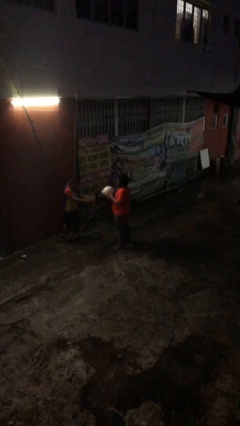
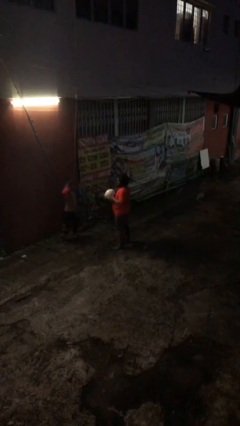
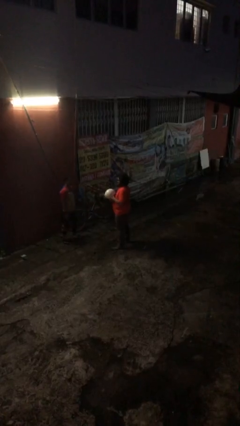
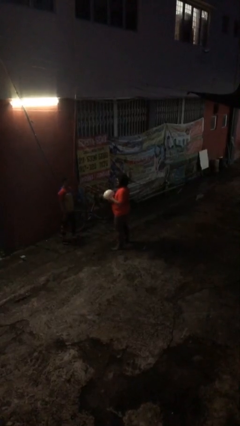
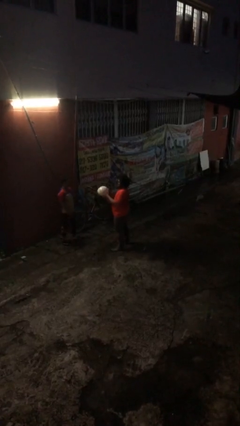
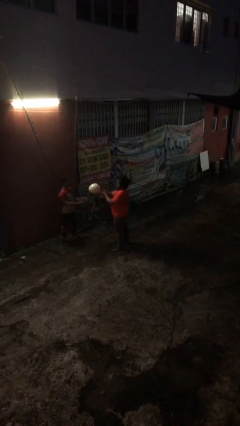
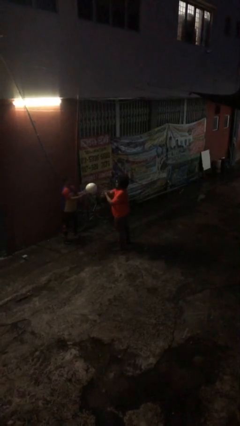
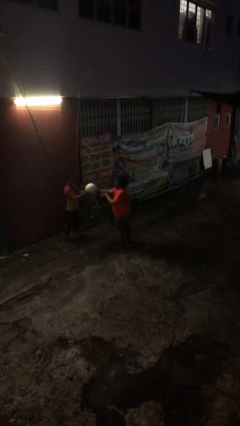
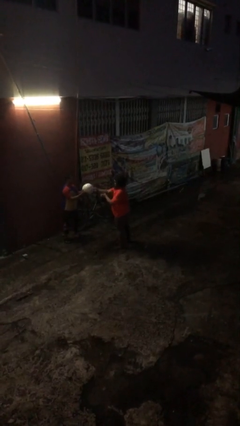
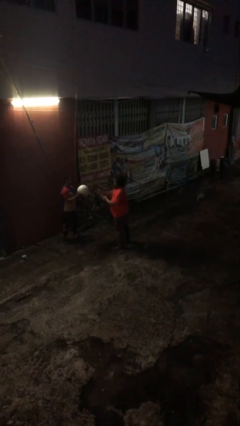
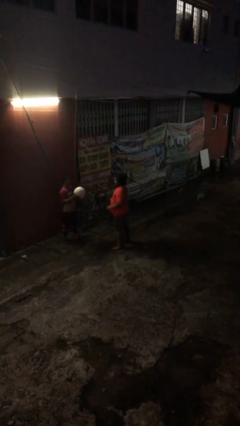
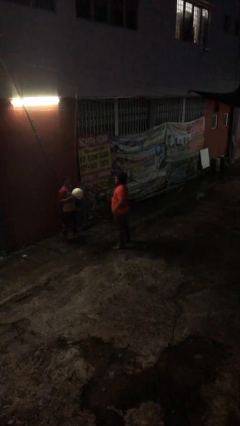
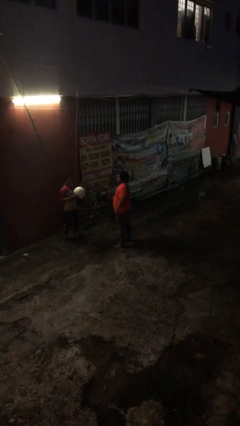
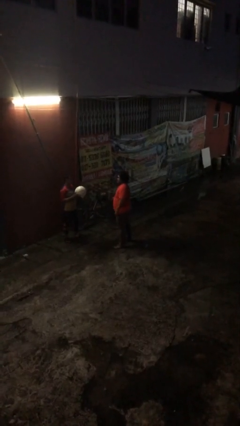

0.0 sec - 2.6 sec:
person transfers object to person

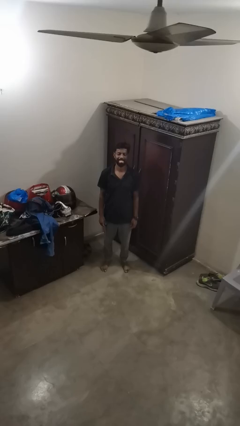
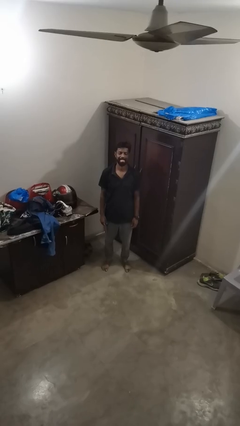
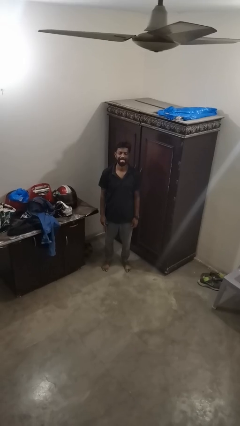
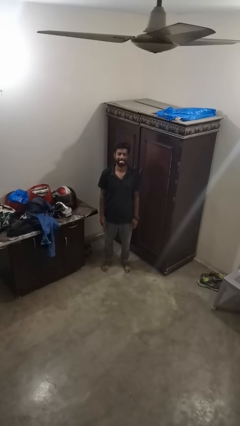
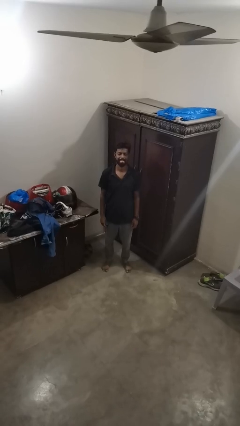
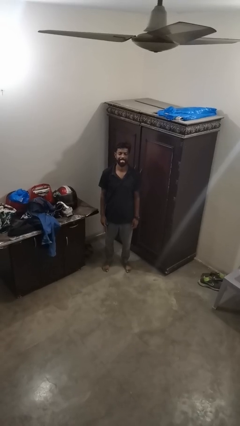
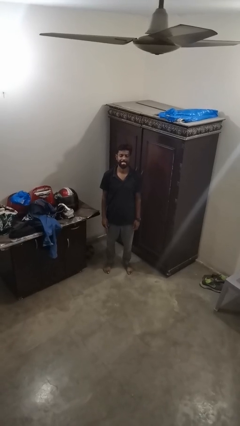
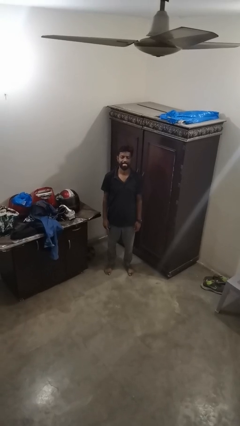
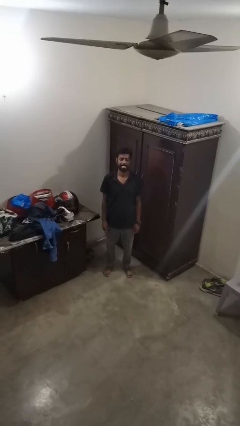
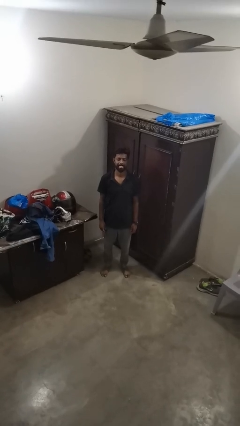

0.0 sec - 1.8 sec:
person sticks out tongue

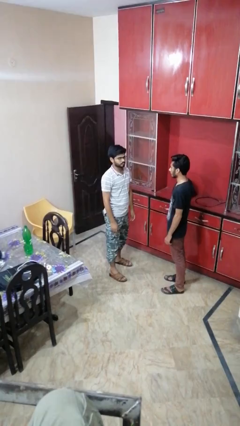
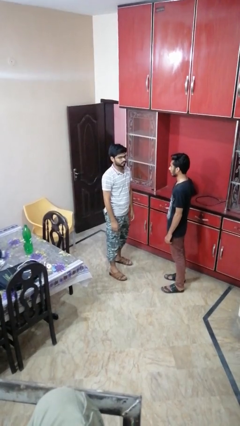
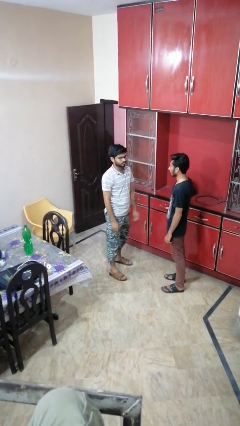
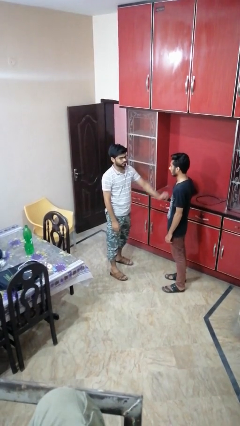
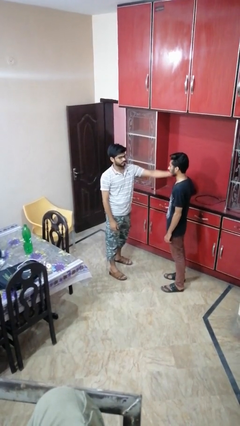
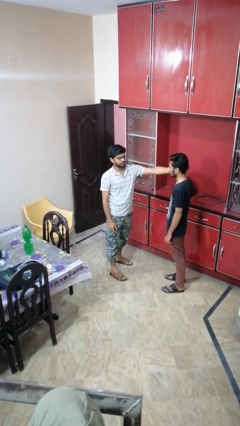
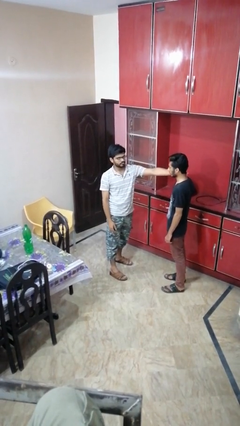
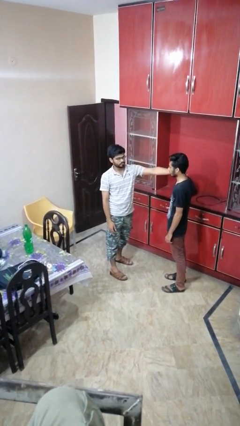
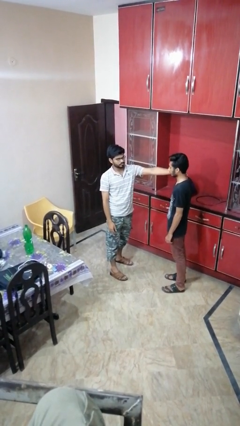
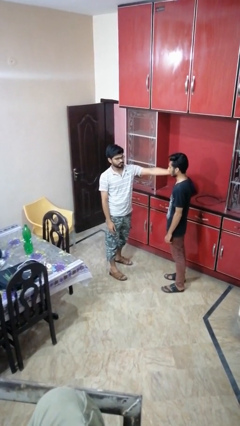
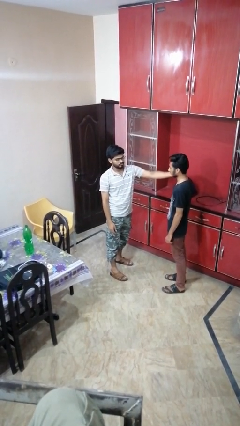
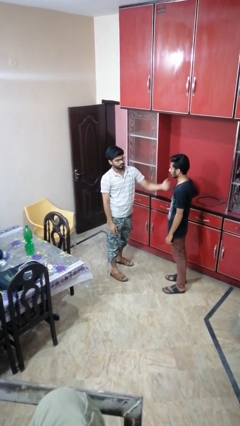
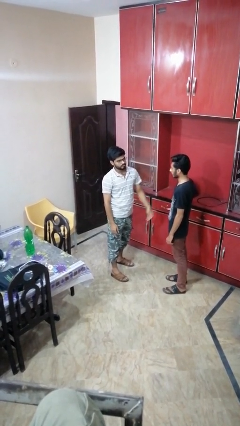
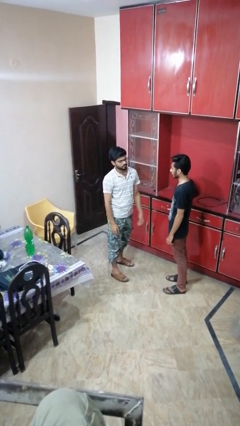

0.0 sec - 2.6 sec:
person touches face of person

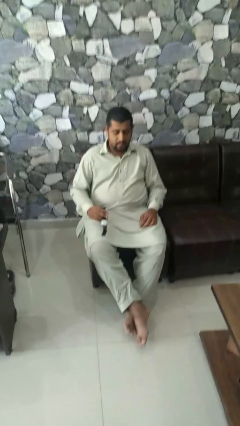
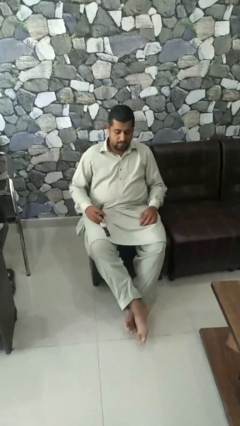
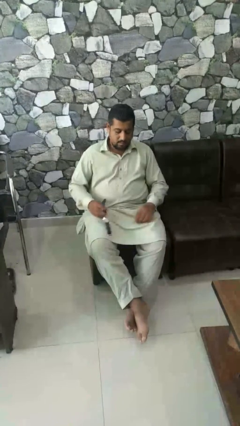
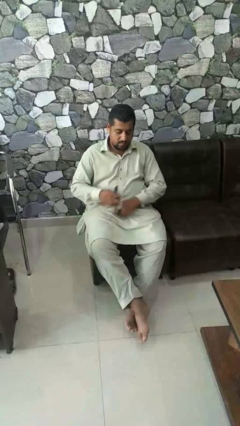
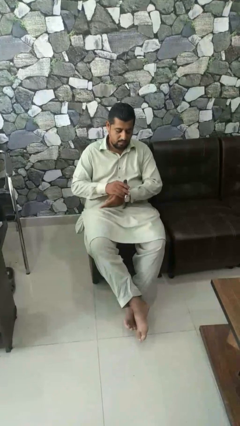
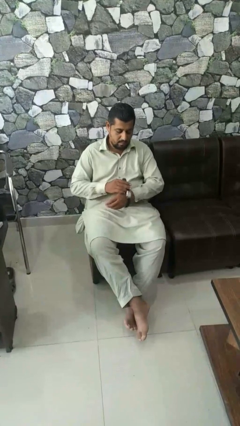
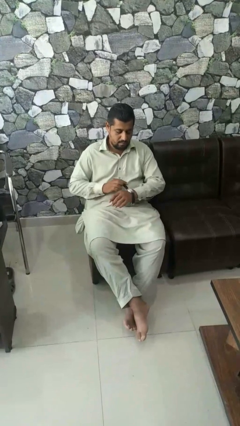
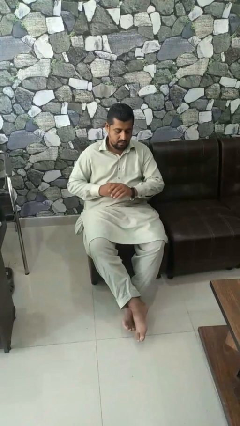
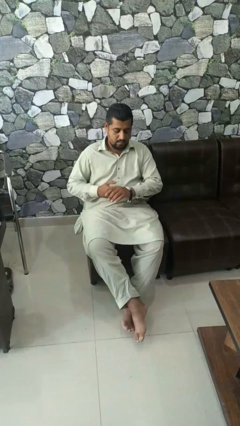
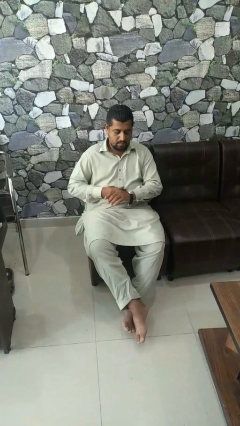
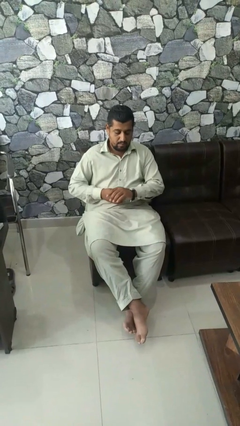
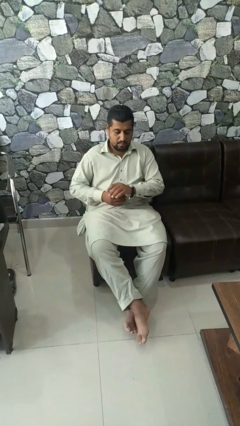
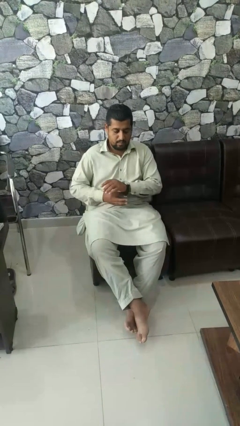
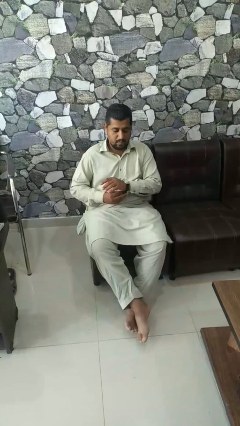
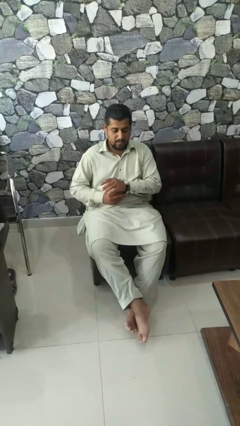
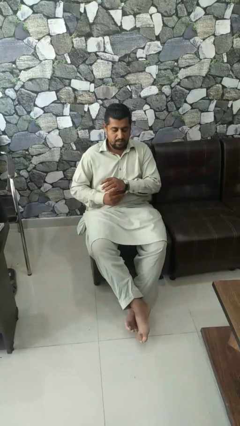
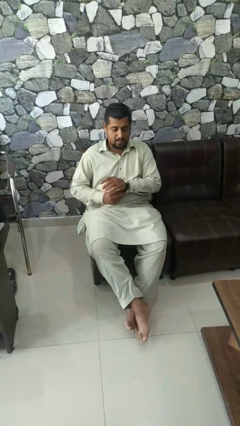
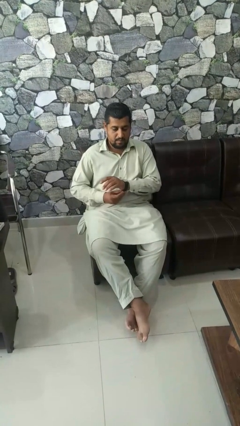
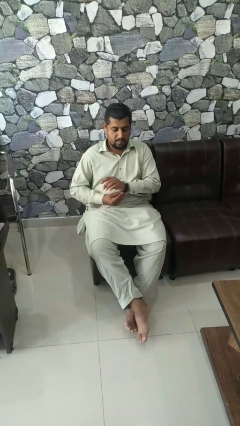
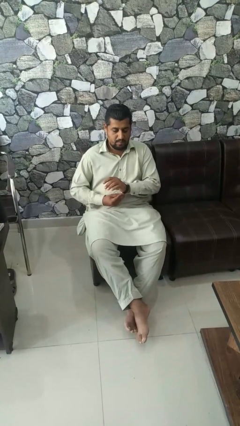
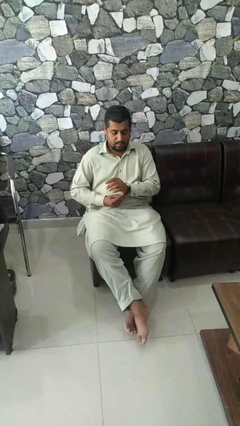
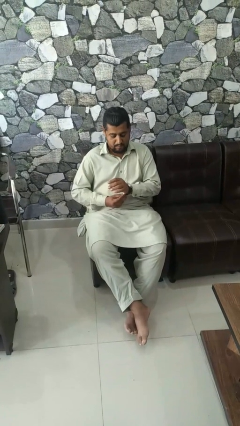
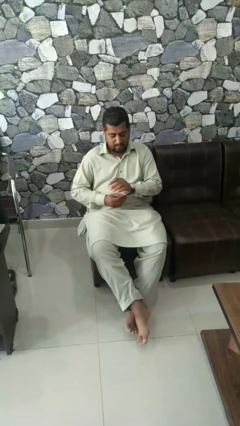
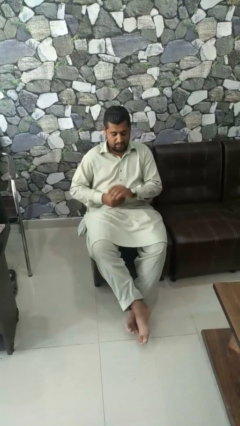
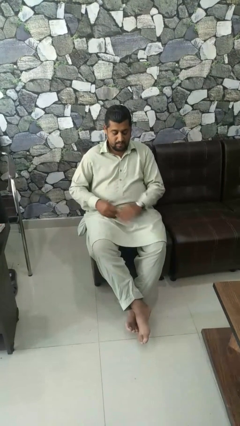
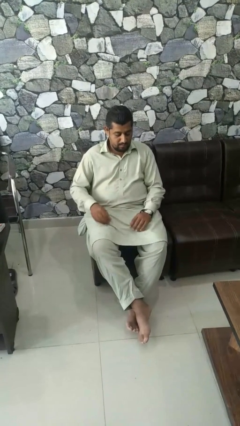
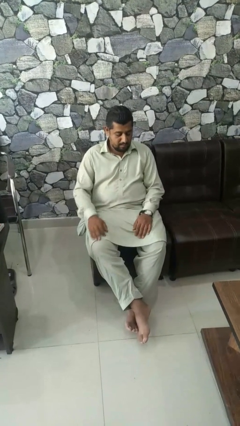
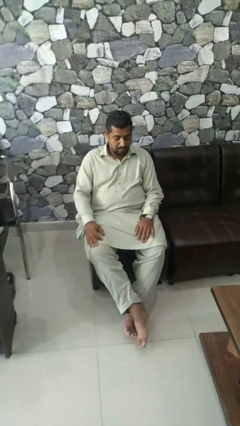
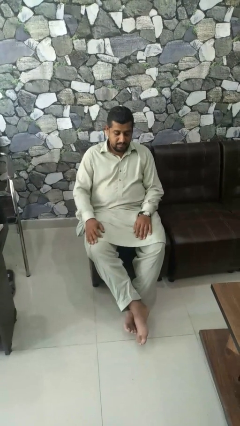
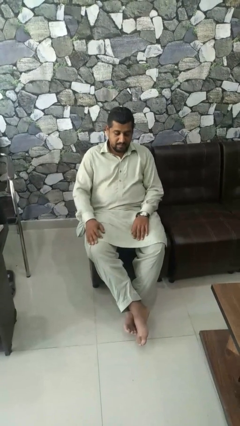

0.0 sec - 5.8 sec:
person puts on wristwatch

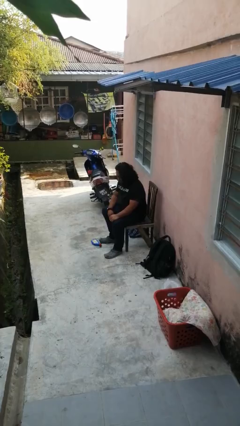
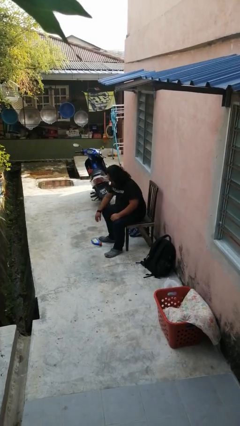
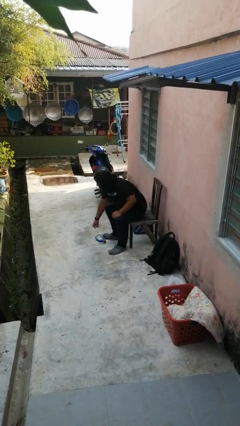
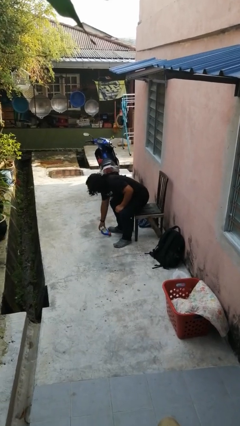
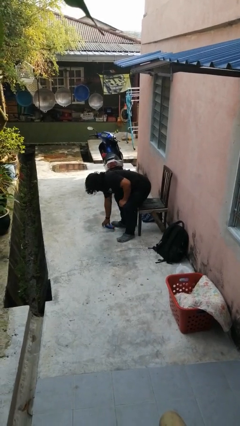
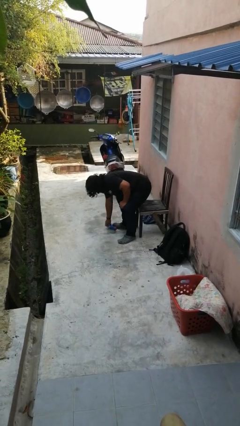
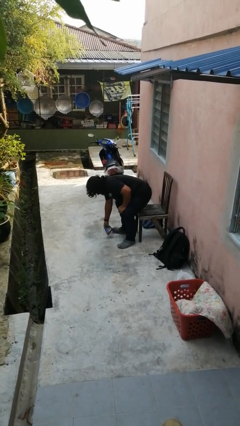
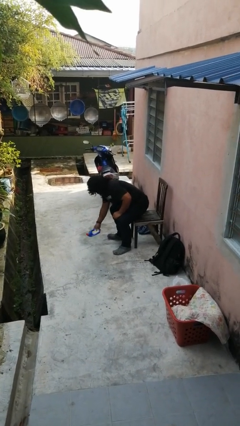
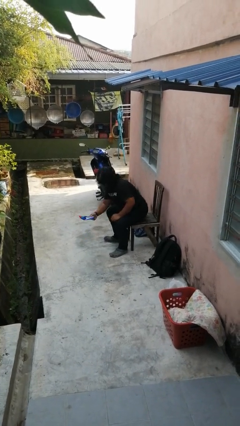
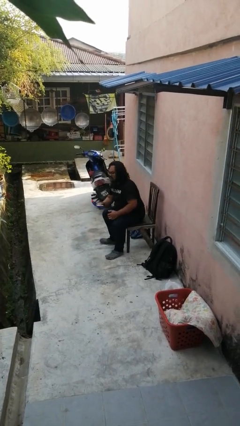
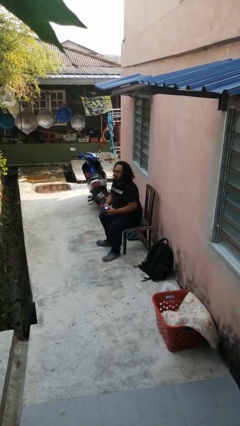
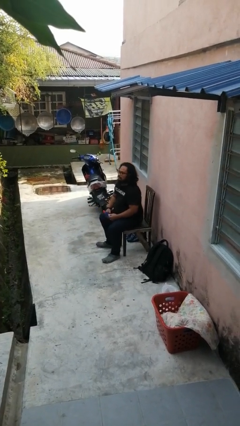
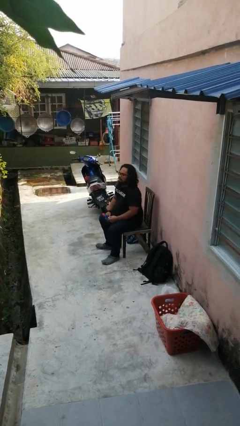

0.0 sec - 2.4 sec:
person picks up object from floor

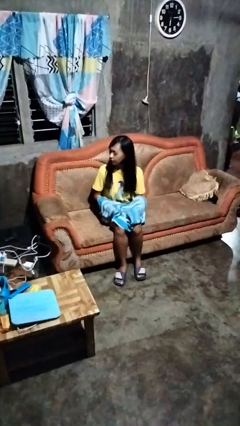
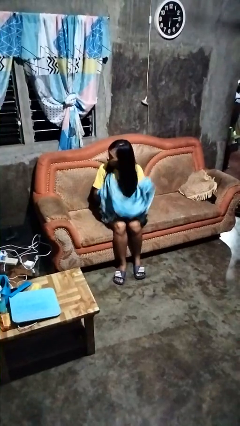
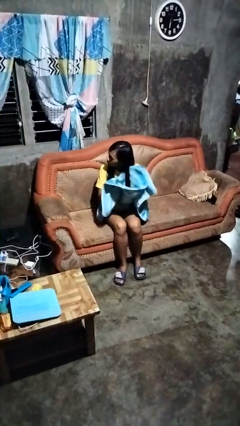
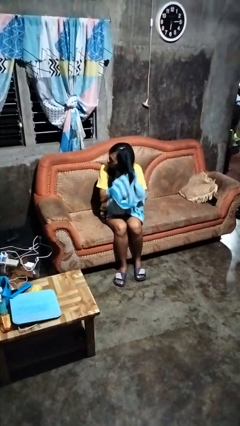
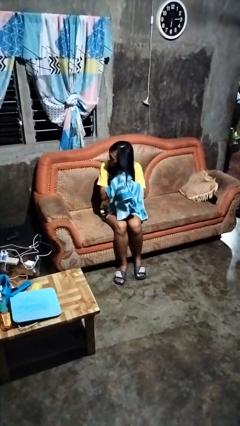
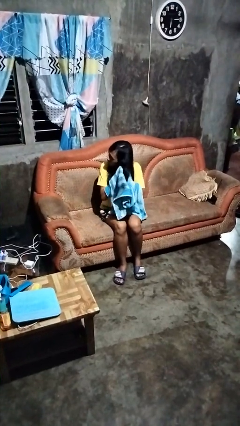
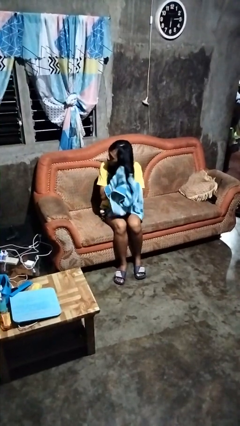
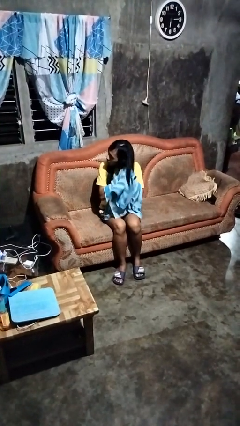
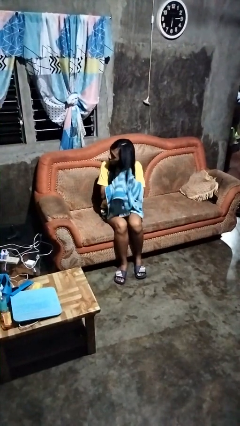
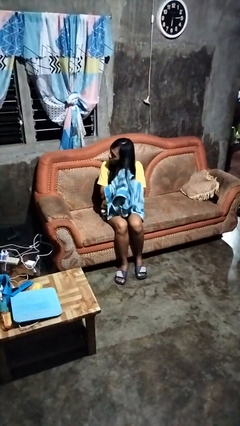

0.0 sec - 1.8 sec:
person dries hair with towel

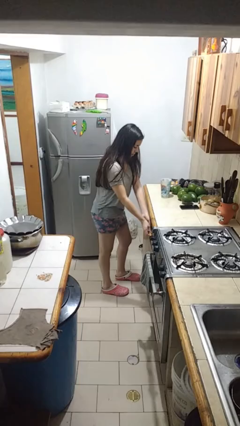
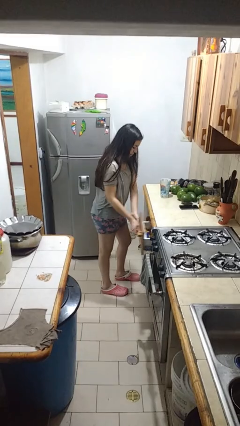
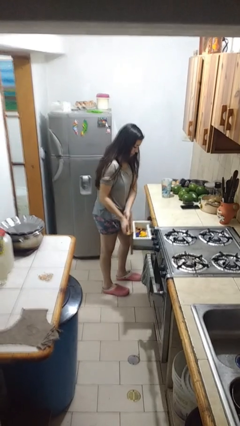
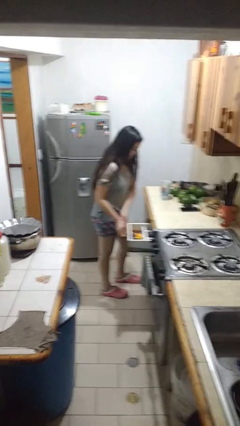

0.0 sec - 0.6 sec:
person opens kitchen drawer
